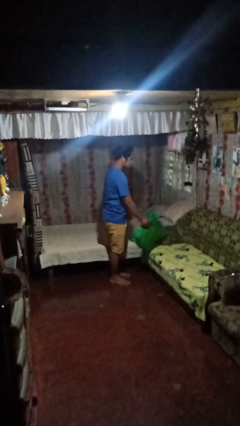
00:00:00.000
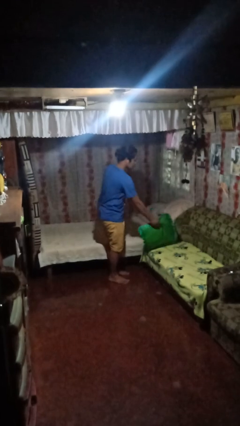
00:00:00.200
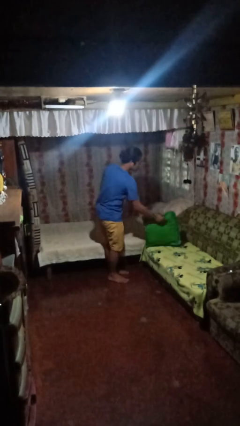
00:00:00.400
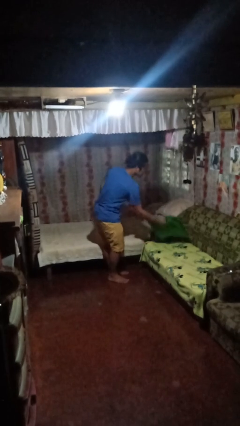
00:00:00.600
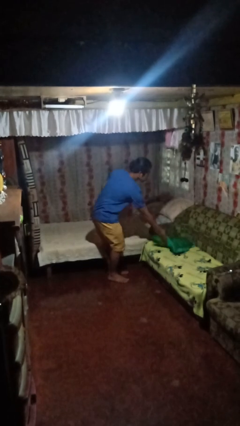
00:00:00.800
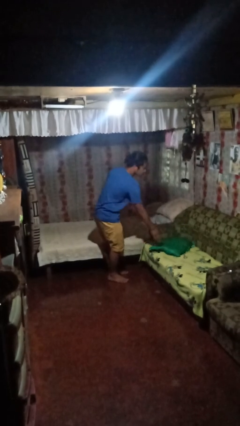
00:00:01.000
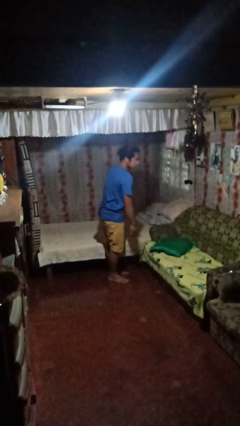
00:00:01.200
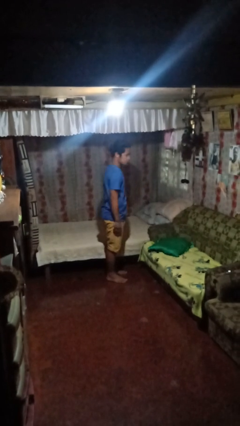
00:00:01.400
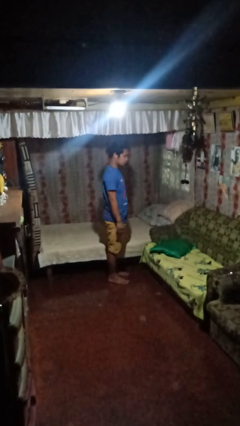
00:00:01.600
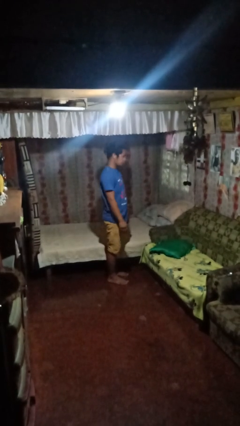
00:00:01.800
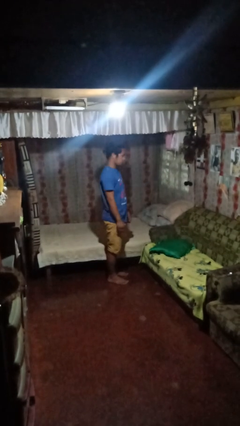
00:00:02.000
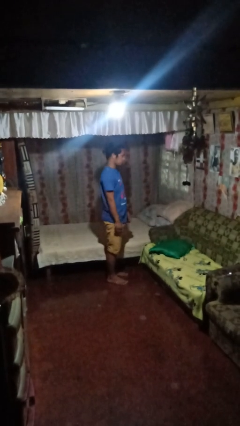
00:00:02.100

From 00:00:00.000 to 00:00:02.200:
person puts down object on couch

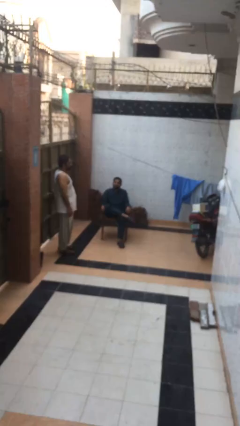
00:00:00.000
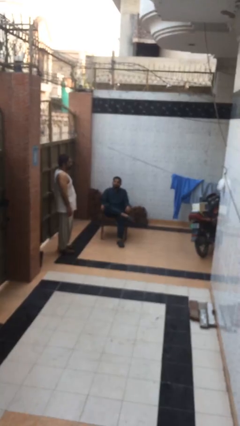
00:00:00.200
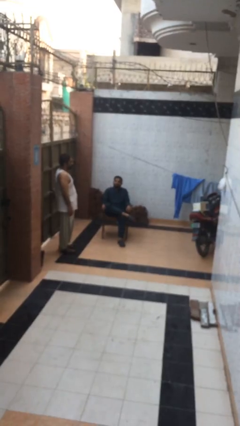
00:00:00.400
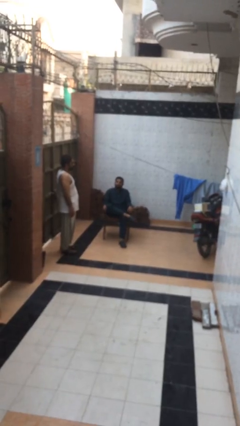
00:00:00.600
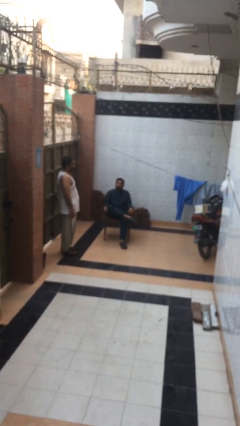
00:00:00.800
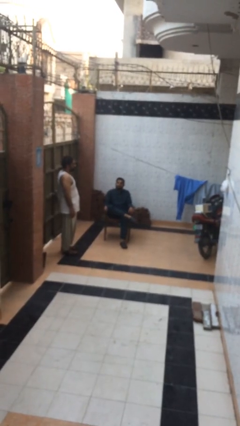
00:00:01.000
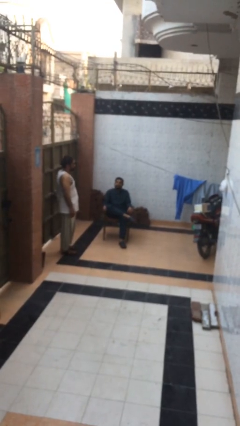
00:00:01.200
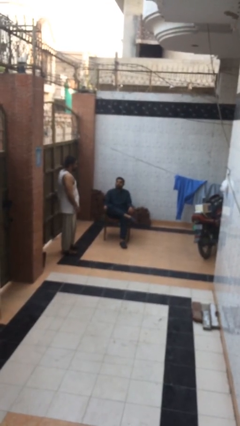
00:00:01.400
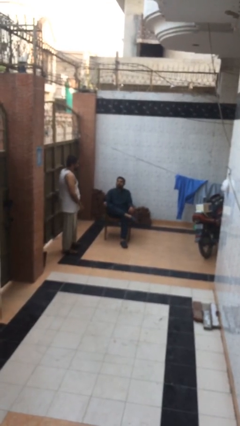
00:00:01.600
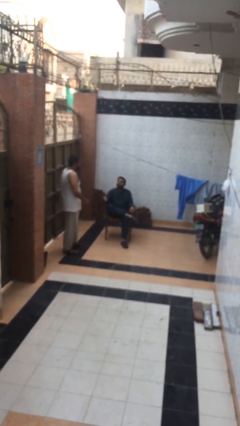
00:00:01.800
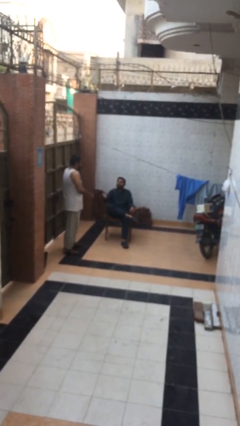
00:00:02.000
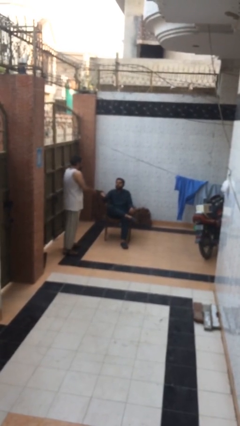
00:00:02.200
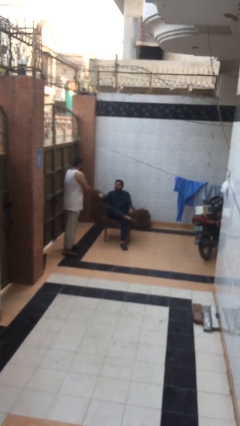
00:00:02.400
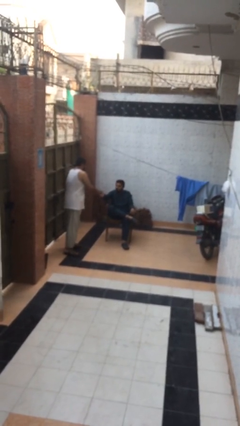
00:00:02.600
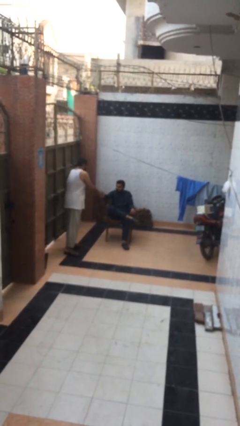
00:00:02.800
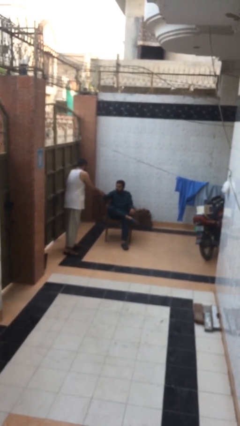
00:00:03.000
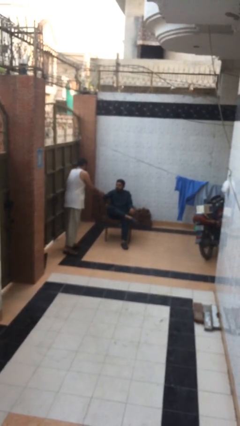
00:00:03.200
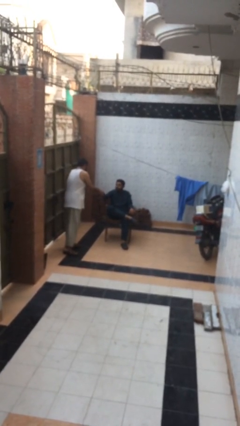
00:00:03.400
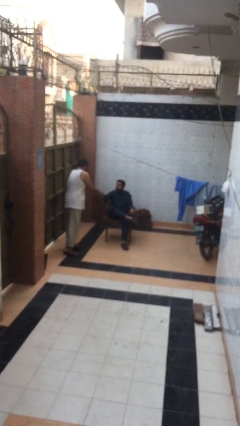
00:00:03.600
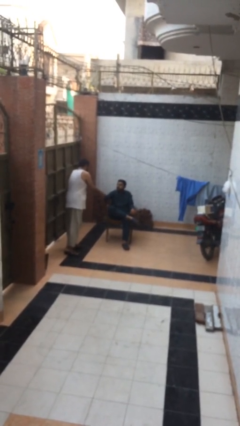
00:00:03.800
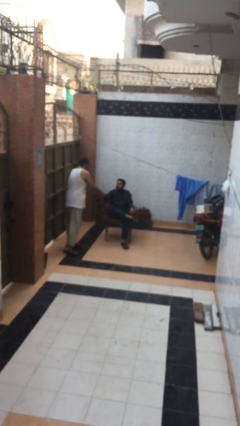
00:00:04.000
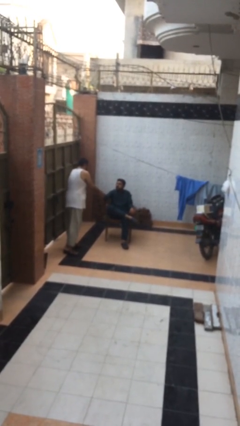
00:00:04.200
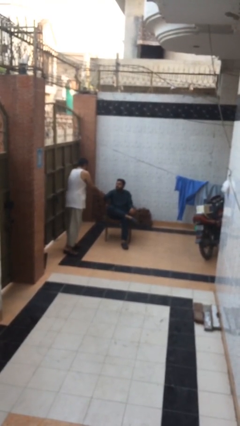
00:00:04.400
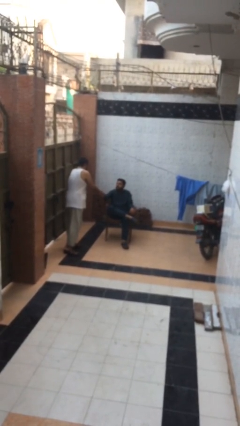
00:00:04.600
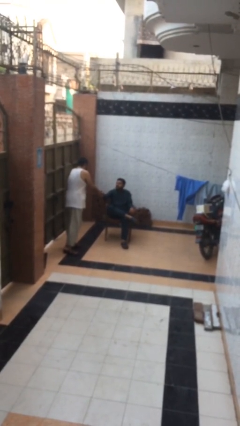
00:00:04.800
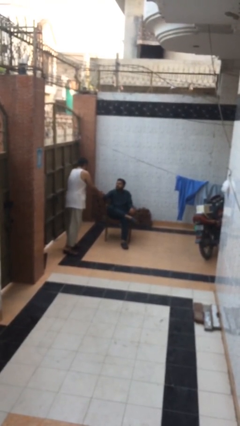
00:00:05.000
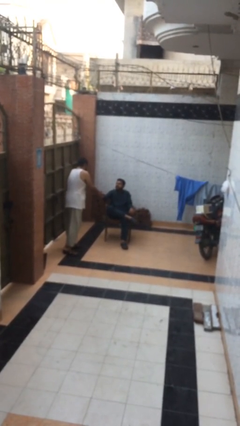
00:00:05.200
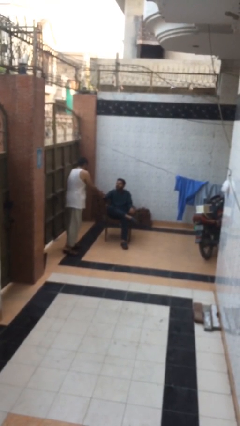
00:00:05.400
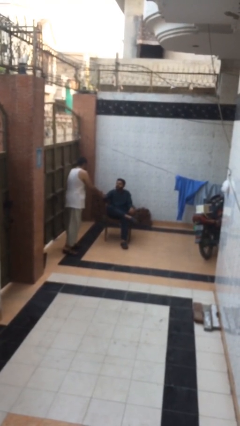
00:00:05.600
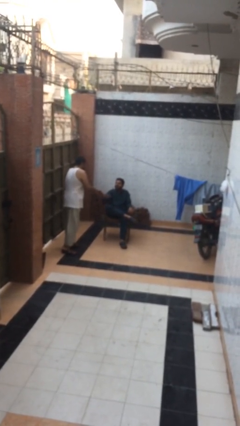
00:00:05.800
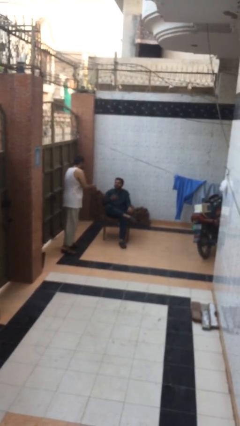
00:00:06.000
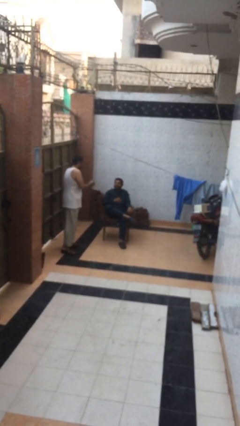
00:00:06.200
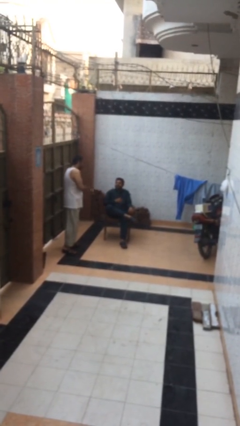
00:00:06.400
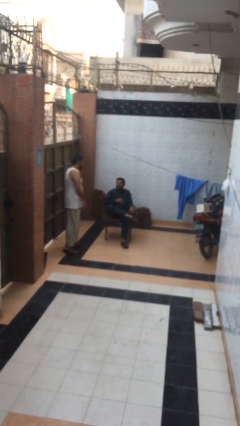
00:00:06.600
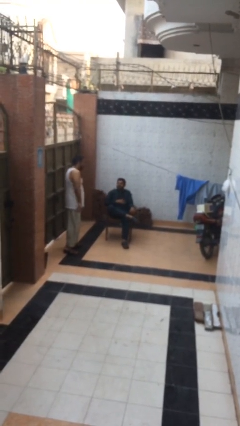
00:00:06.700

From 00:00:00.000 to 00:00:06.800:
person shakes hand

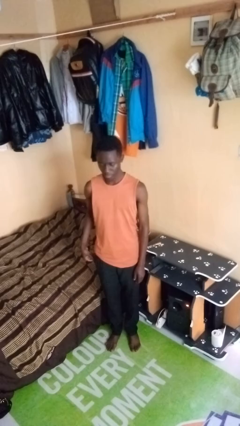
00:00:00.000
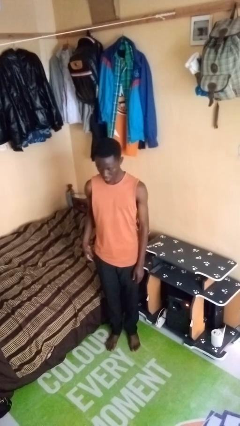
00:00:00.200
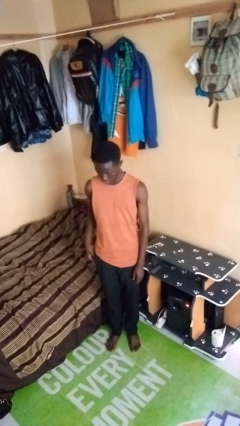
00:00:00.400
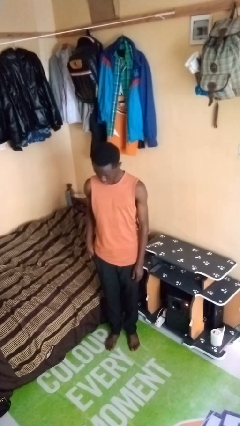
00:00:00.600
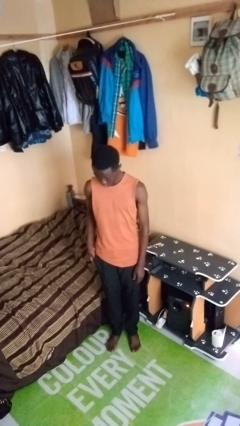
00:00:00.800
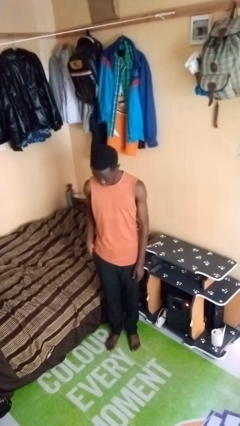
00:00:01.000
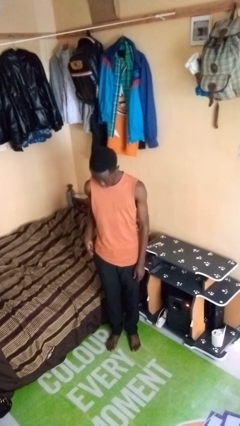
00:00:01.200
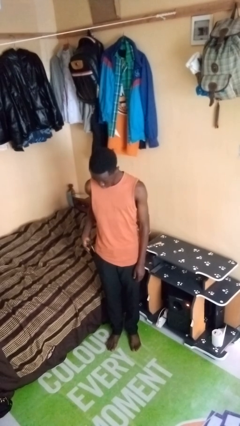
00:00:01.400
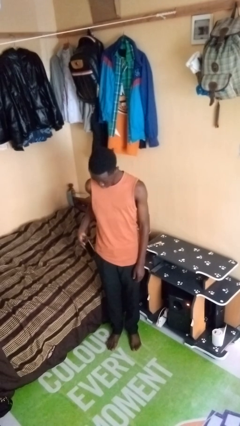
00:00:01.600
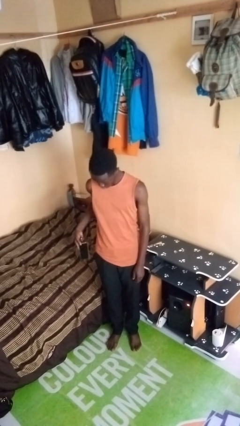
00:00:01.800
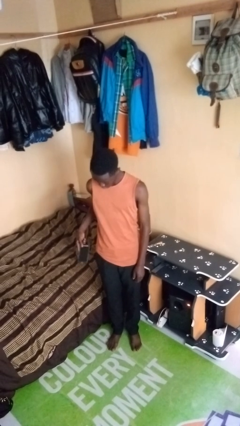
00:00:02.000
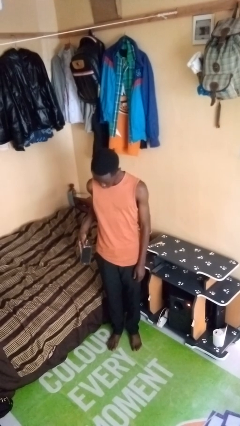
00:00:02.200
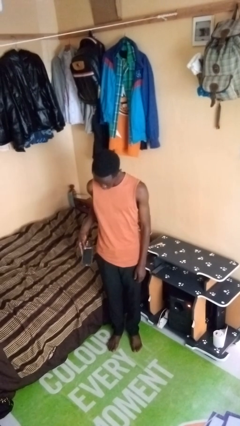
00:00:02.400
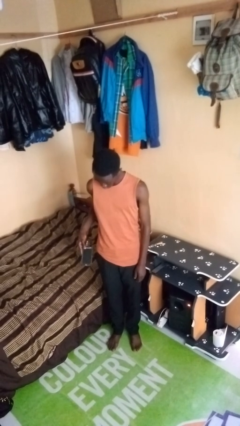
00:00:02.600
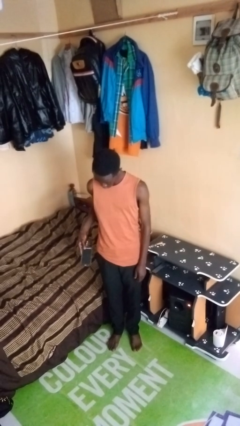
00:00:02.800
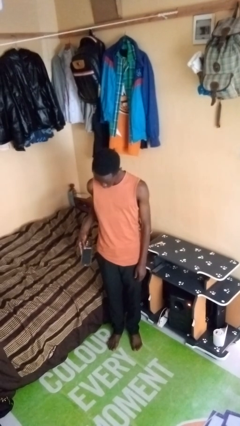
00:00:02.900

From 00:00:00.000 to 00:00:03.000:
person takes phone from pocket

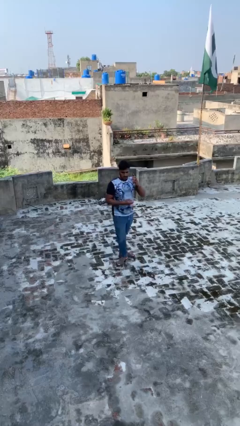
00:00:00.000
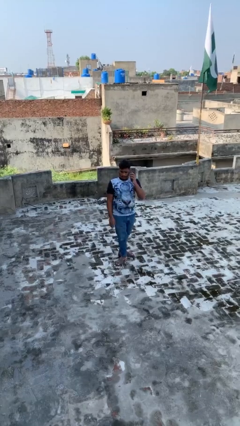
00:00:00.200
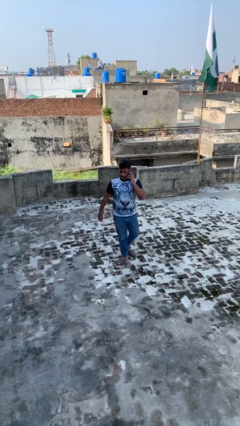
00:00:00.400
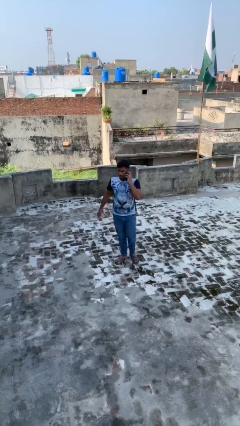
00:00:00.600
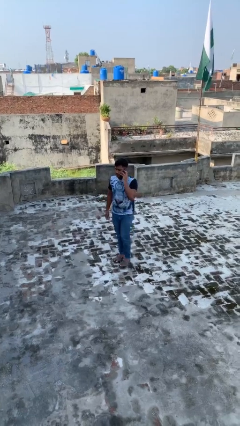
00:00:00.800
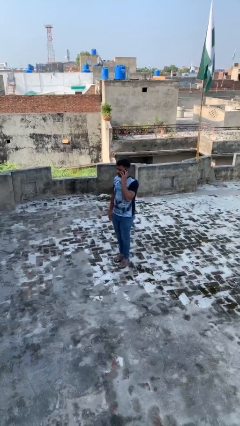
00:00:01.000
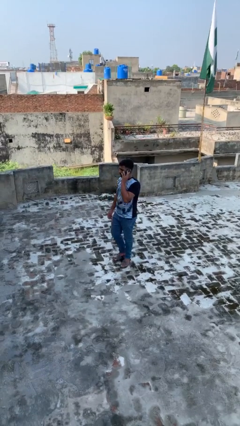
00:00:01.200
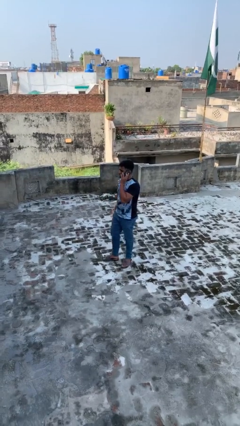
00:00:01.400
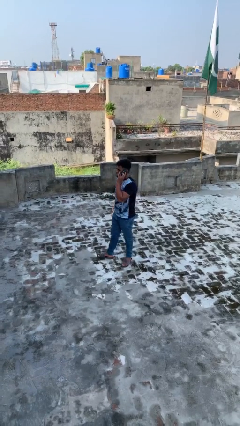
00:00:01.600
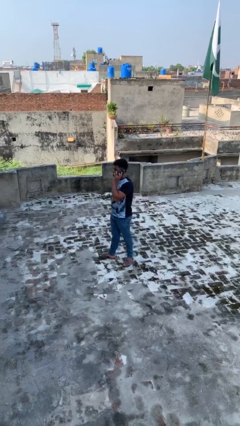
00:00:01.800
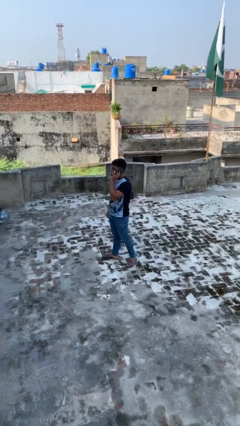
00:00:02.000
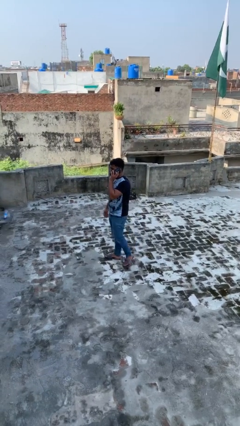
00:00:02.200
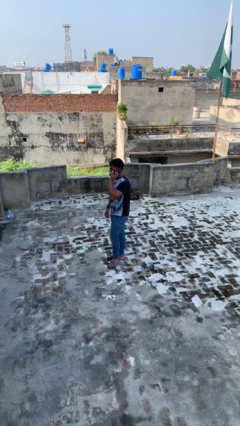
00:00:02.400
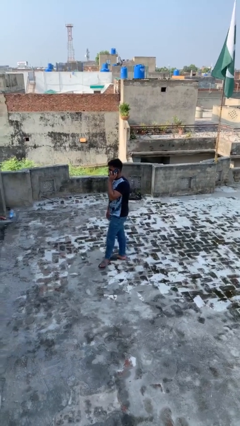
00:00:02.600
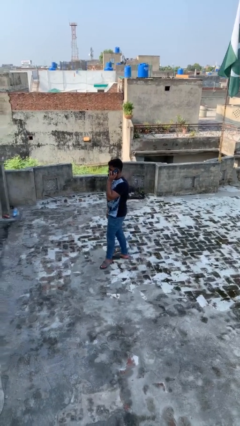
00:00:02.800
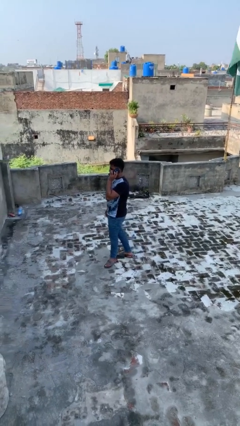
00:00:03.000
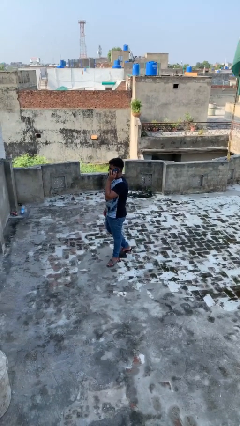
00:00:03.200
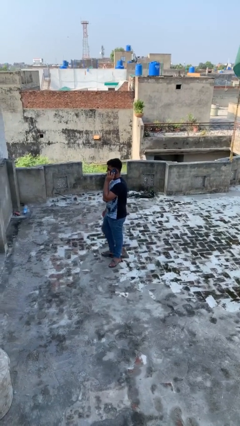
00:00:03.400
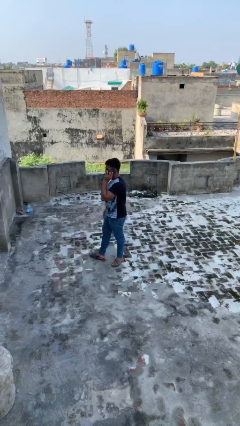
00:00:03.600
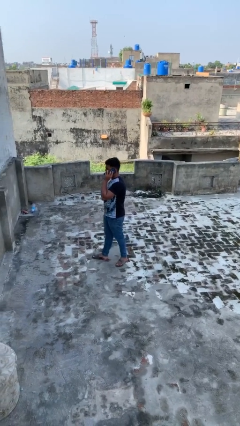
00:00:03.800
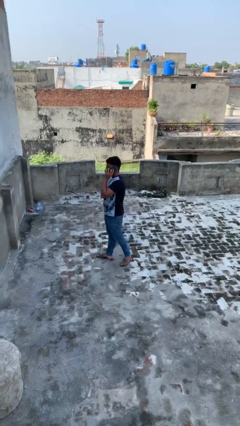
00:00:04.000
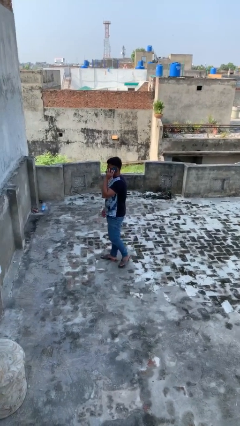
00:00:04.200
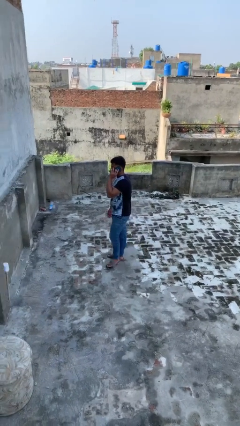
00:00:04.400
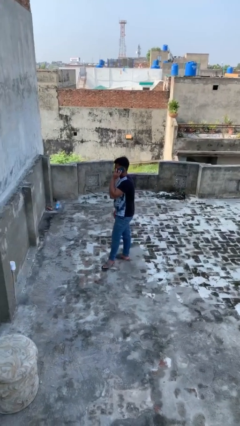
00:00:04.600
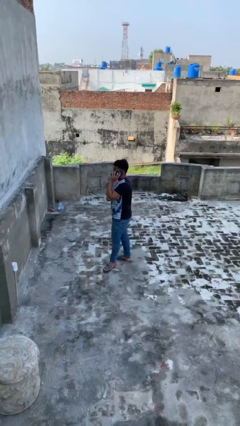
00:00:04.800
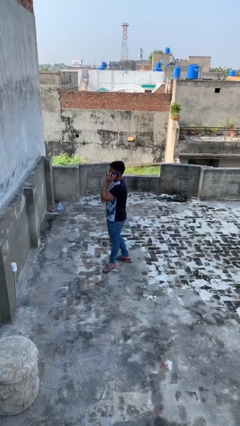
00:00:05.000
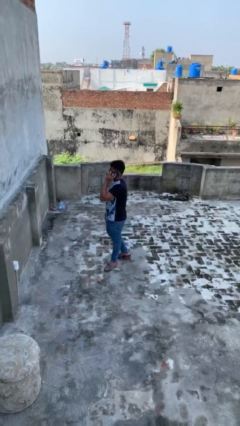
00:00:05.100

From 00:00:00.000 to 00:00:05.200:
person talks on phone

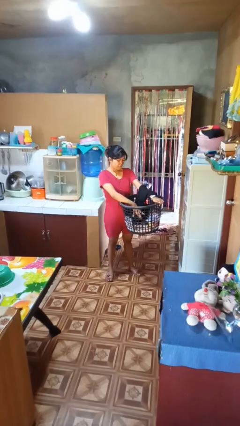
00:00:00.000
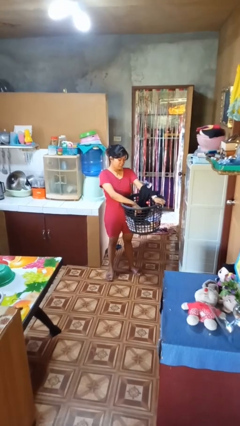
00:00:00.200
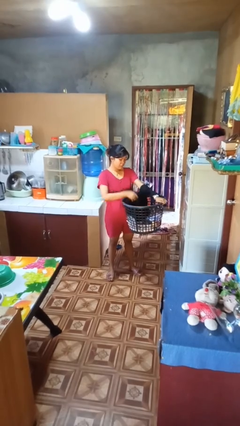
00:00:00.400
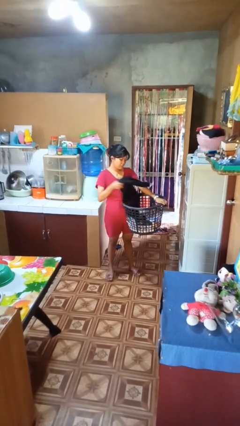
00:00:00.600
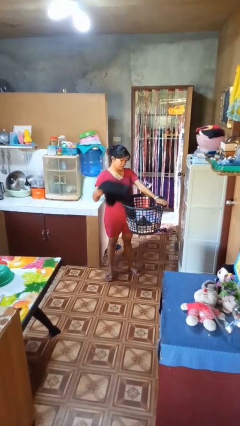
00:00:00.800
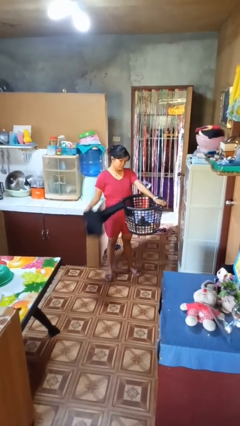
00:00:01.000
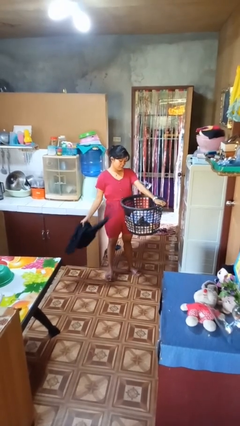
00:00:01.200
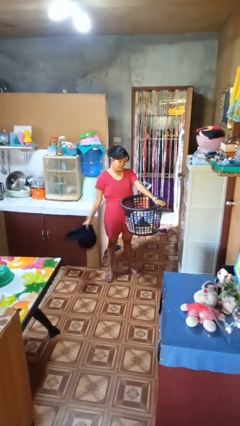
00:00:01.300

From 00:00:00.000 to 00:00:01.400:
person takes object from basket
